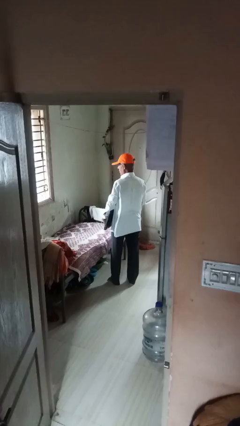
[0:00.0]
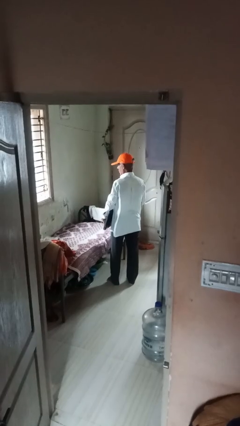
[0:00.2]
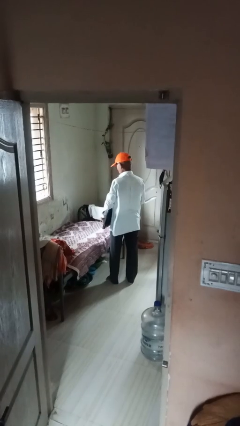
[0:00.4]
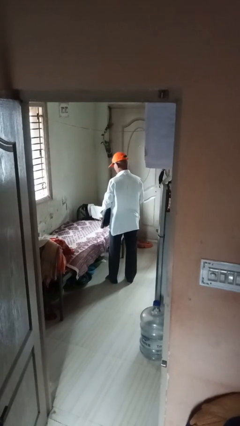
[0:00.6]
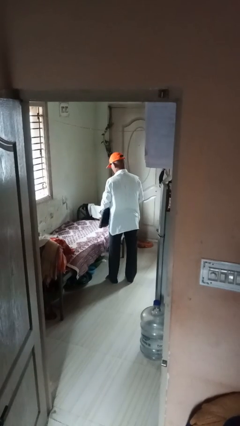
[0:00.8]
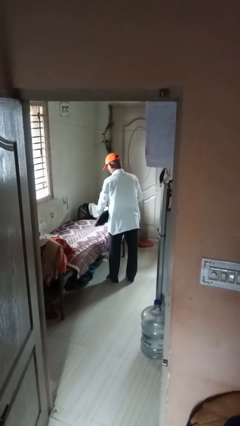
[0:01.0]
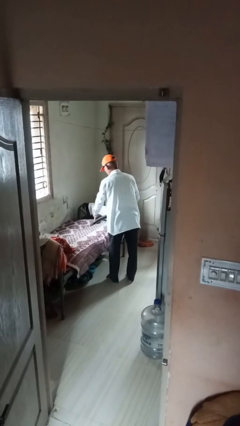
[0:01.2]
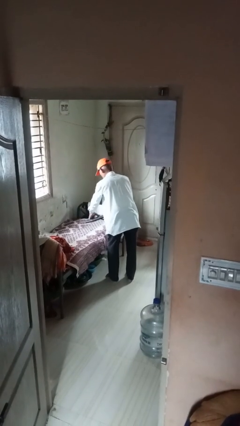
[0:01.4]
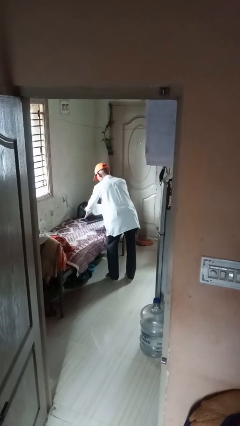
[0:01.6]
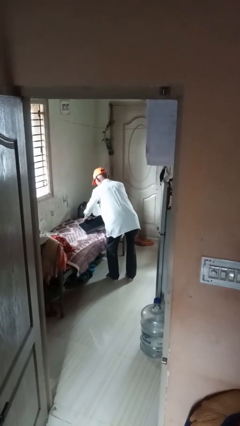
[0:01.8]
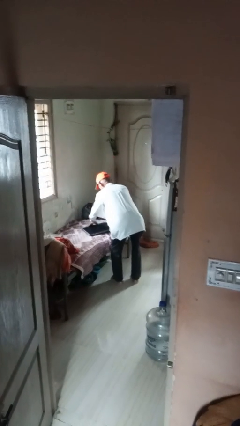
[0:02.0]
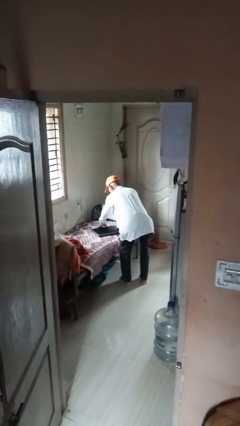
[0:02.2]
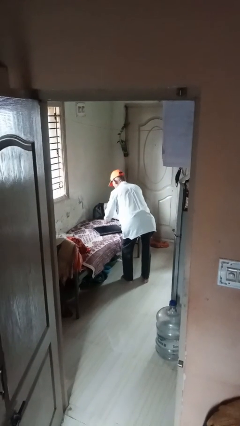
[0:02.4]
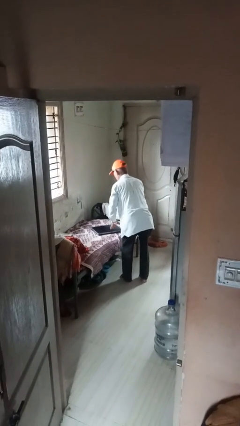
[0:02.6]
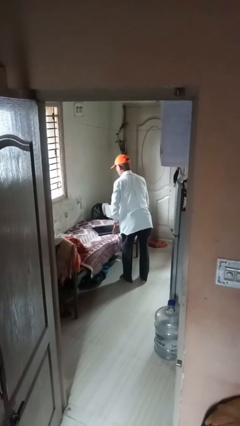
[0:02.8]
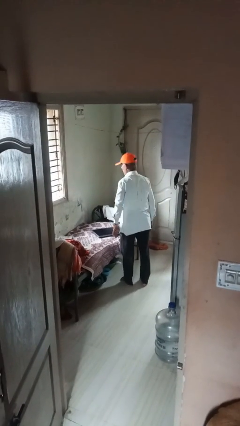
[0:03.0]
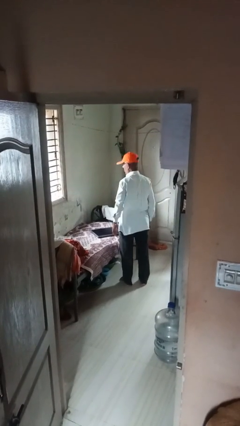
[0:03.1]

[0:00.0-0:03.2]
person puts down object on bed

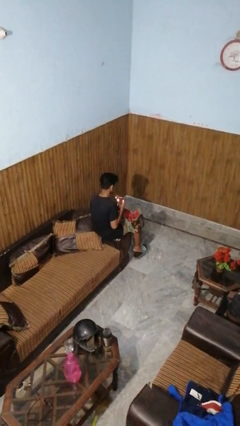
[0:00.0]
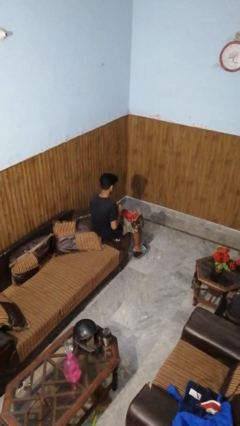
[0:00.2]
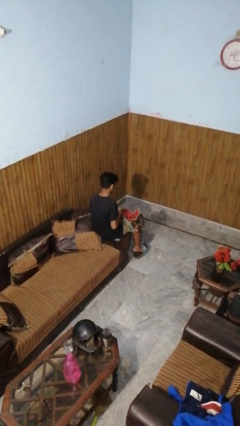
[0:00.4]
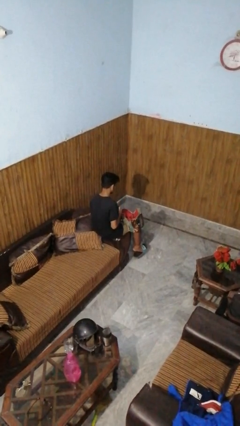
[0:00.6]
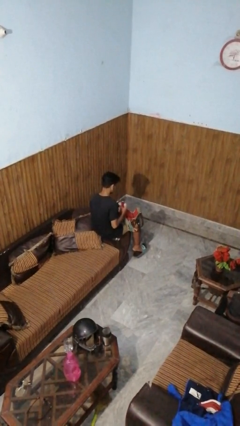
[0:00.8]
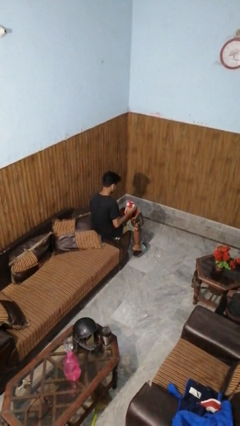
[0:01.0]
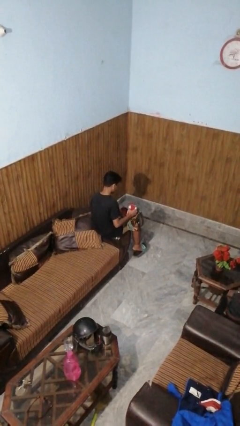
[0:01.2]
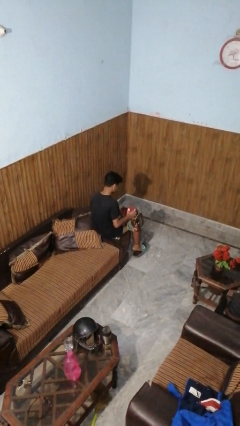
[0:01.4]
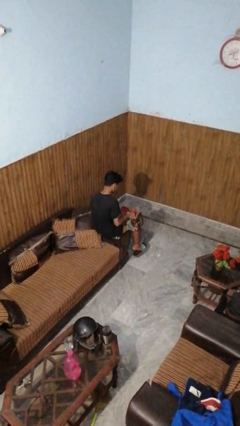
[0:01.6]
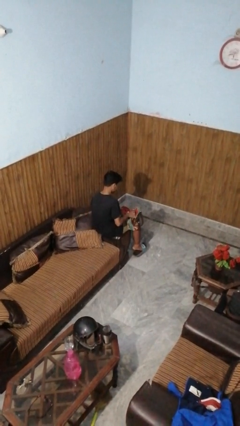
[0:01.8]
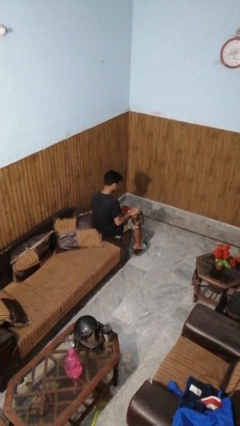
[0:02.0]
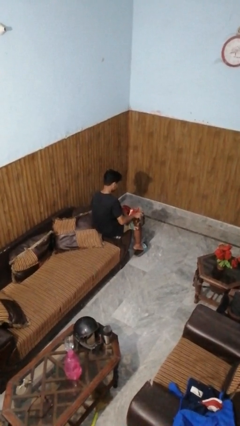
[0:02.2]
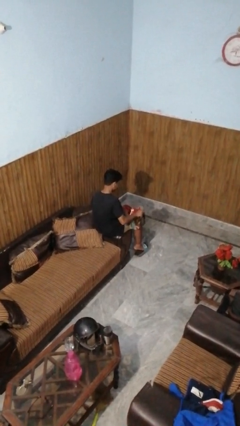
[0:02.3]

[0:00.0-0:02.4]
person puts object into purse

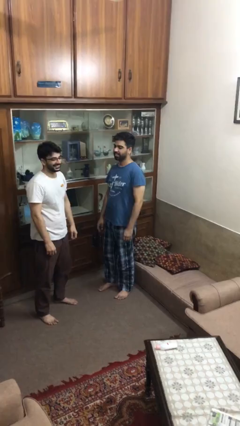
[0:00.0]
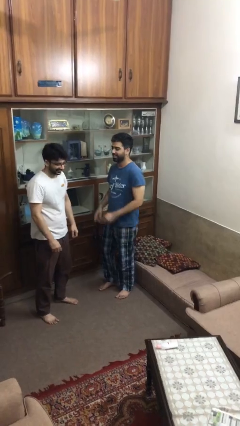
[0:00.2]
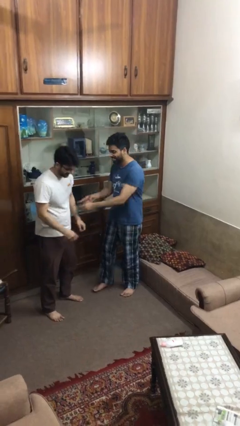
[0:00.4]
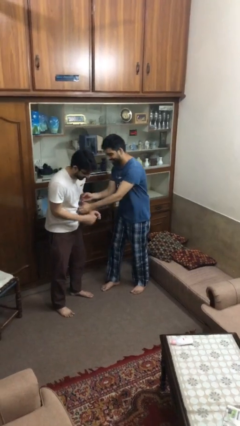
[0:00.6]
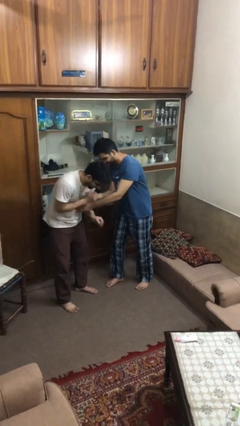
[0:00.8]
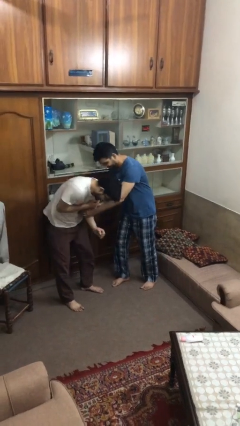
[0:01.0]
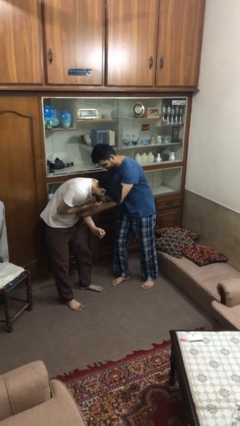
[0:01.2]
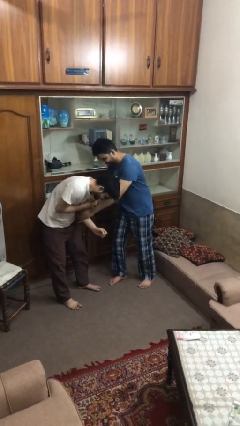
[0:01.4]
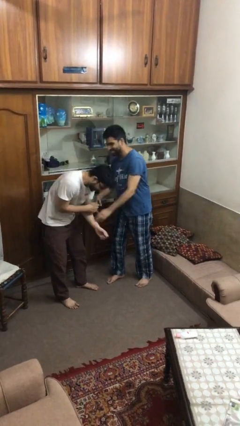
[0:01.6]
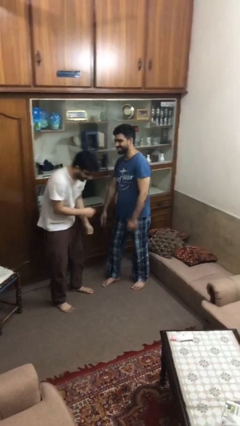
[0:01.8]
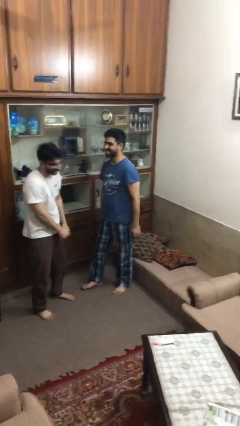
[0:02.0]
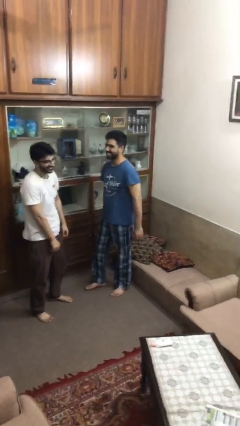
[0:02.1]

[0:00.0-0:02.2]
person tickles person

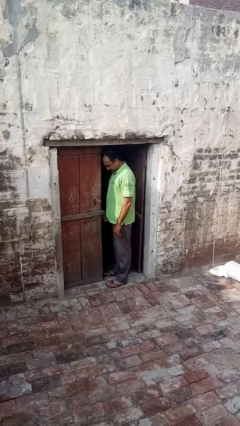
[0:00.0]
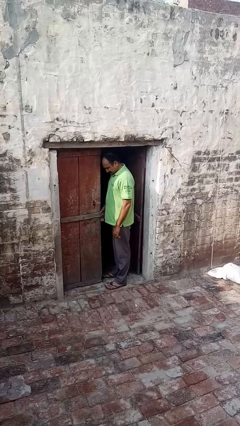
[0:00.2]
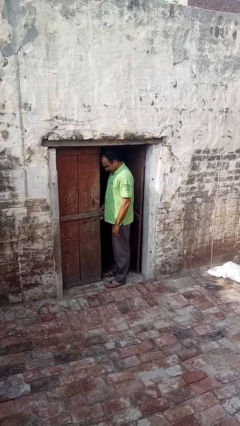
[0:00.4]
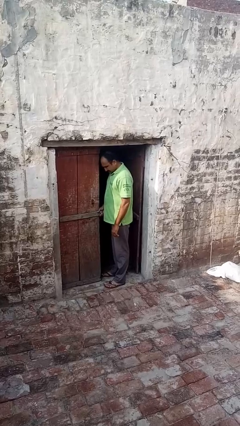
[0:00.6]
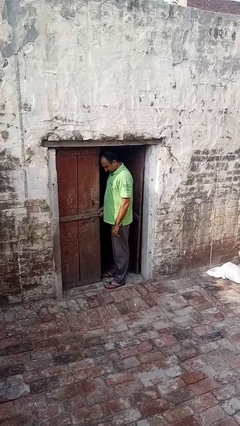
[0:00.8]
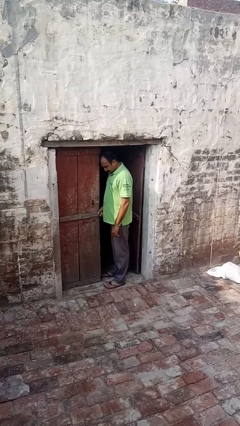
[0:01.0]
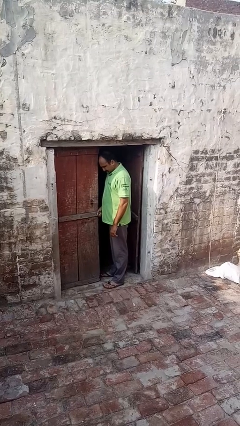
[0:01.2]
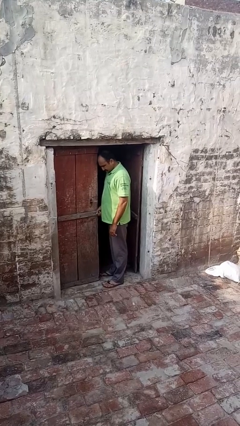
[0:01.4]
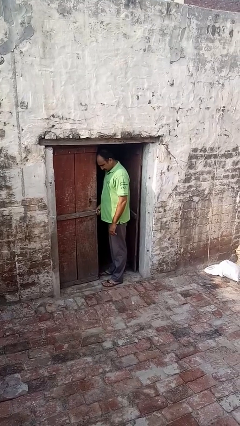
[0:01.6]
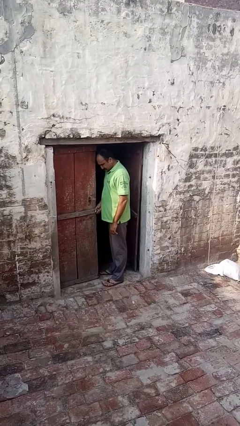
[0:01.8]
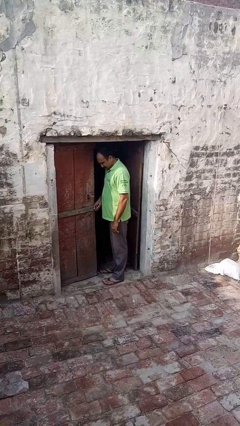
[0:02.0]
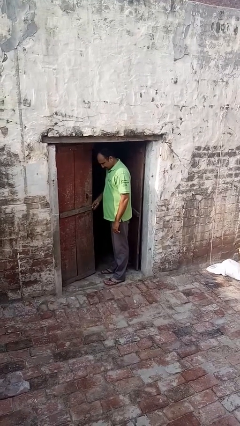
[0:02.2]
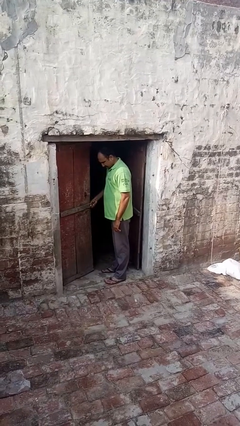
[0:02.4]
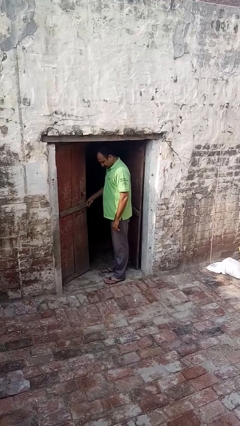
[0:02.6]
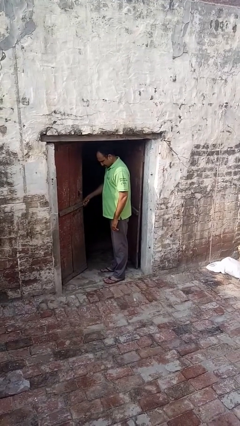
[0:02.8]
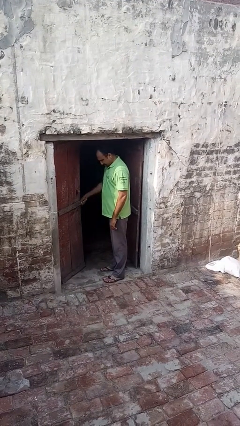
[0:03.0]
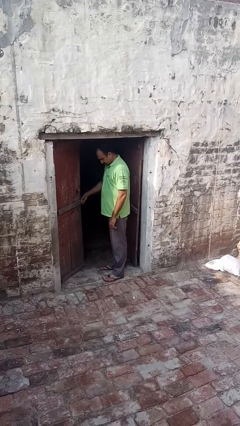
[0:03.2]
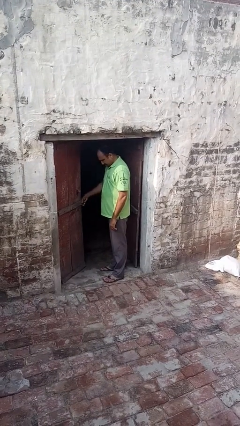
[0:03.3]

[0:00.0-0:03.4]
person opens facility door

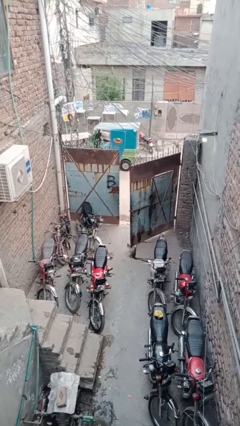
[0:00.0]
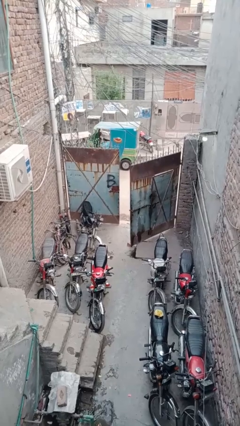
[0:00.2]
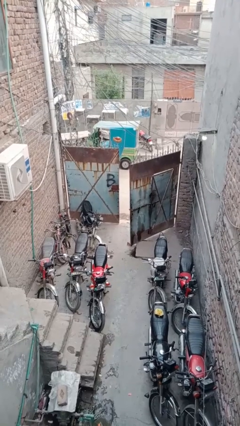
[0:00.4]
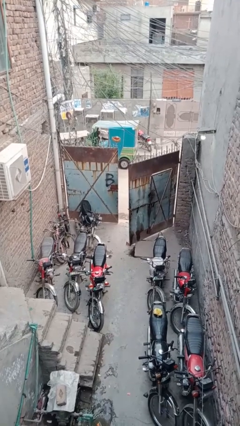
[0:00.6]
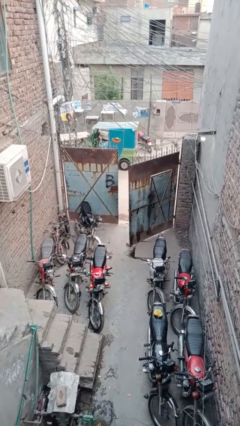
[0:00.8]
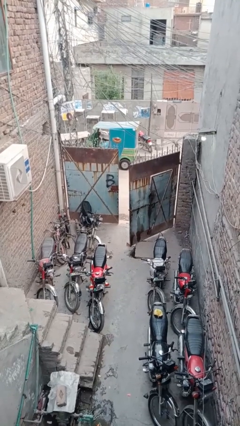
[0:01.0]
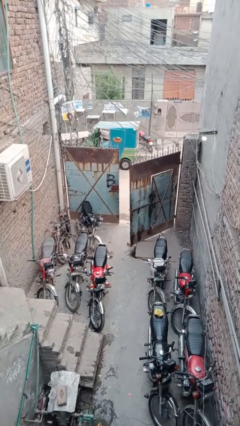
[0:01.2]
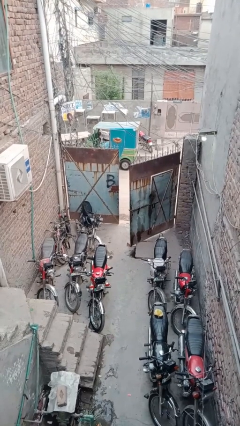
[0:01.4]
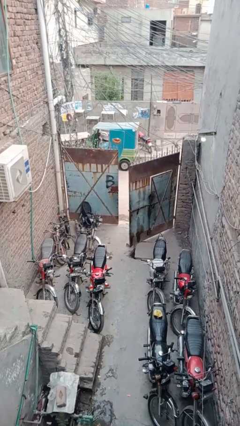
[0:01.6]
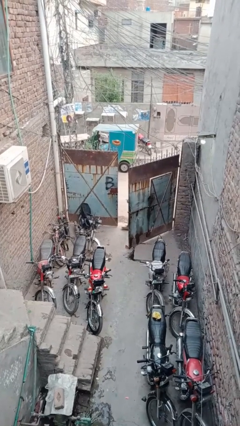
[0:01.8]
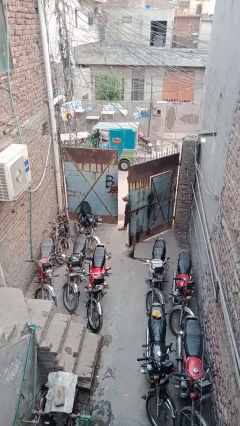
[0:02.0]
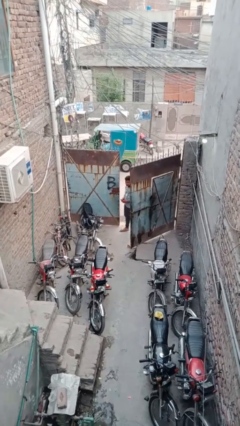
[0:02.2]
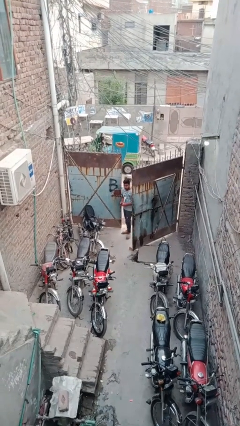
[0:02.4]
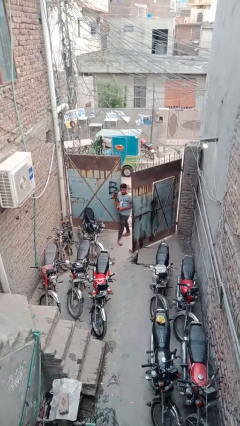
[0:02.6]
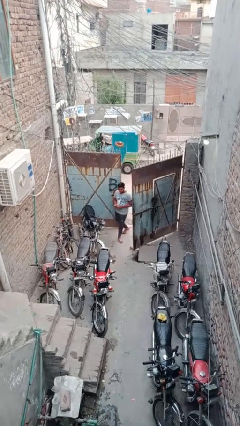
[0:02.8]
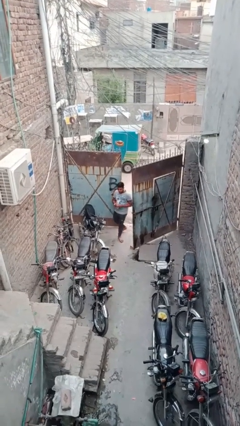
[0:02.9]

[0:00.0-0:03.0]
person enters scene through structure

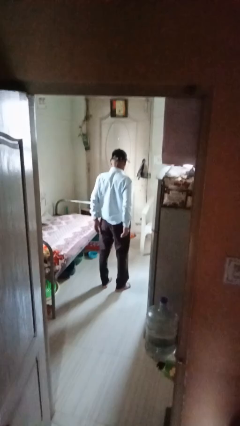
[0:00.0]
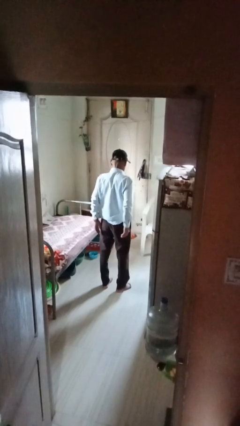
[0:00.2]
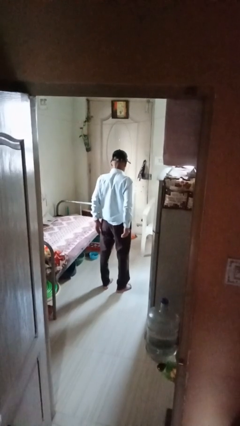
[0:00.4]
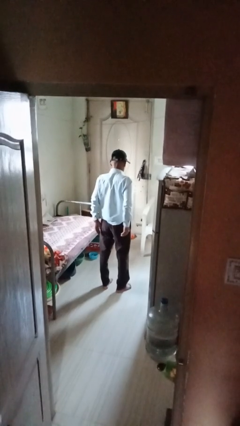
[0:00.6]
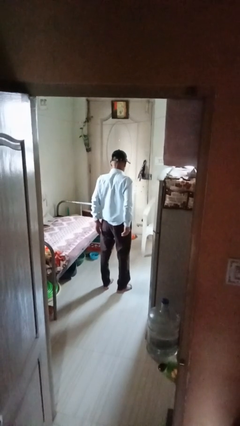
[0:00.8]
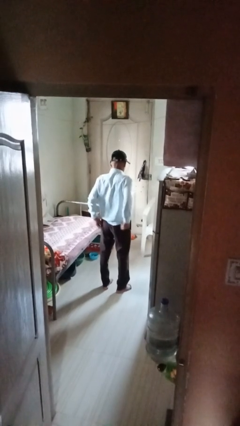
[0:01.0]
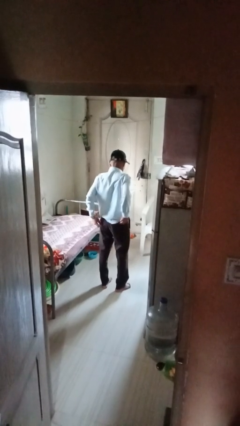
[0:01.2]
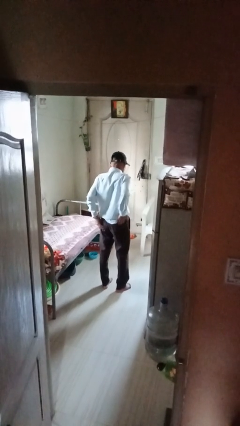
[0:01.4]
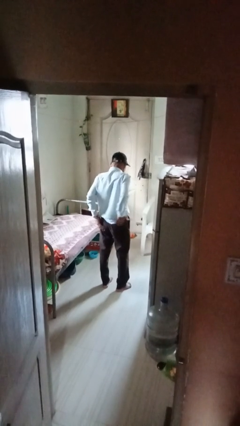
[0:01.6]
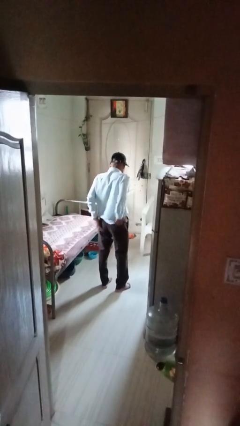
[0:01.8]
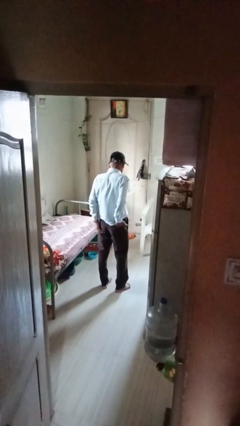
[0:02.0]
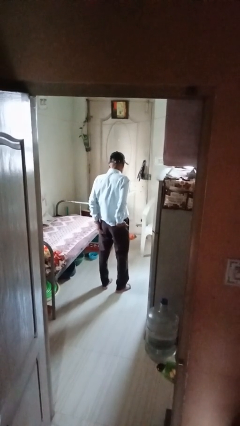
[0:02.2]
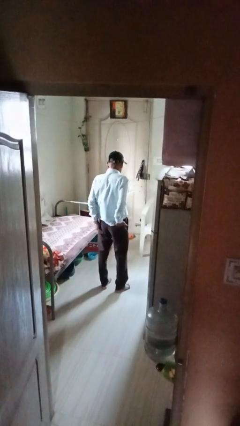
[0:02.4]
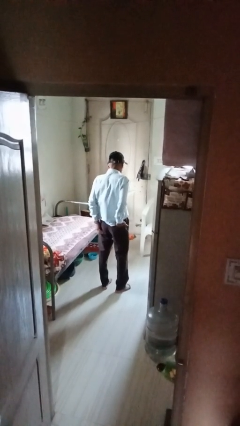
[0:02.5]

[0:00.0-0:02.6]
person puts hands in back pockets
